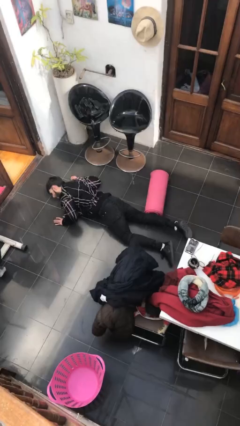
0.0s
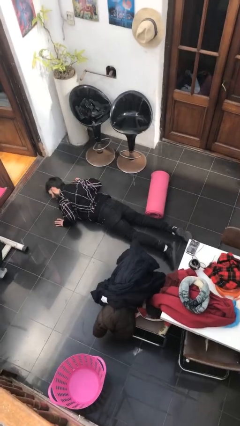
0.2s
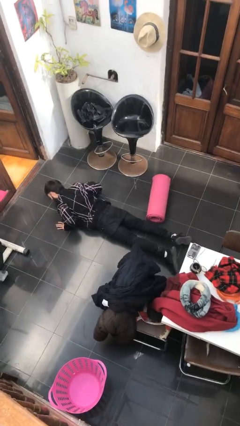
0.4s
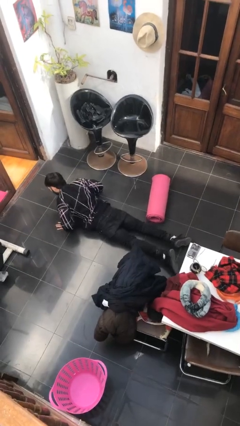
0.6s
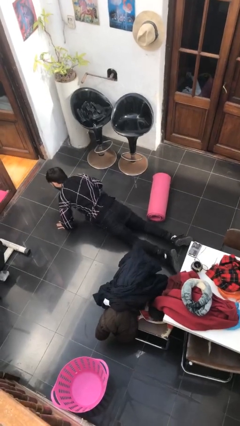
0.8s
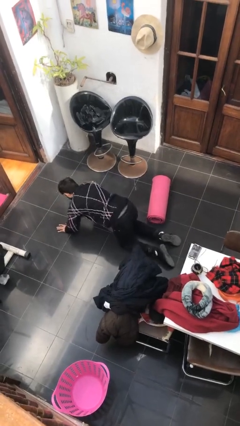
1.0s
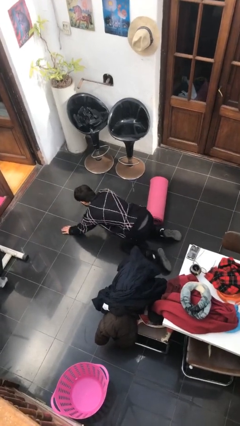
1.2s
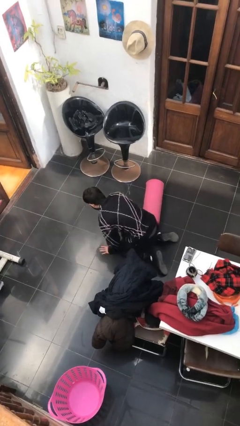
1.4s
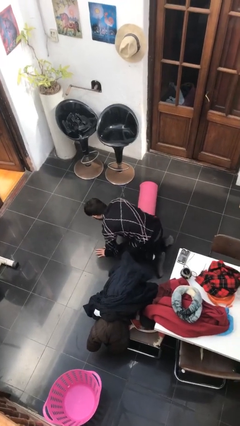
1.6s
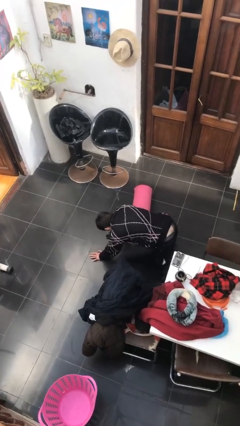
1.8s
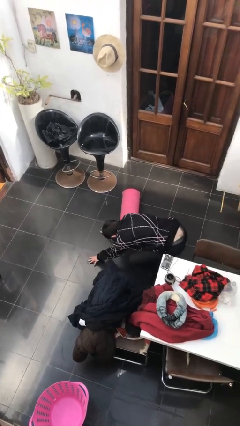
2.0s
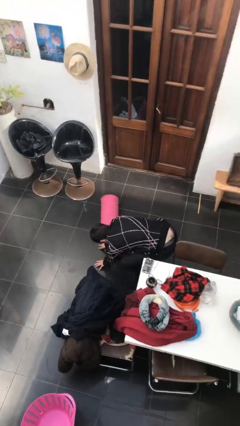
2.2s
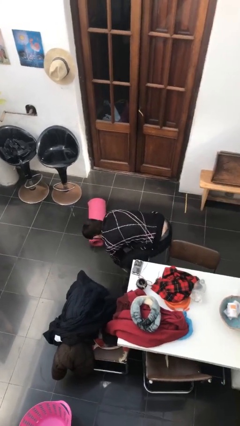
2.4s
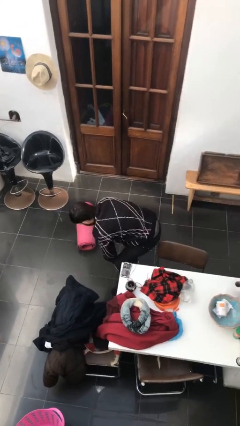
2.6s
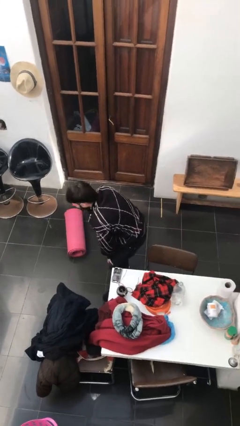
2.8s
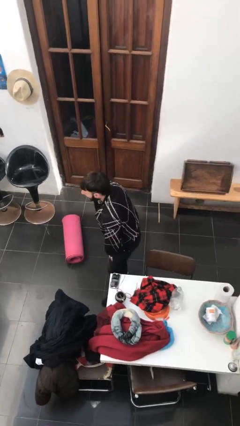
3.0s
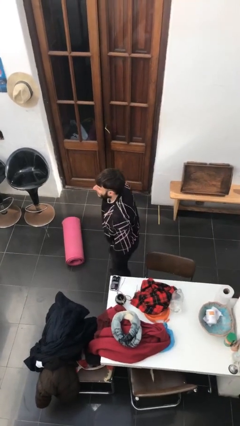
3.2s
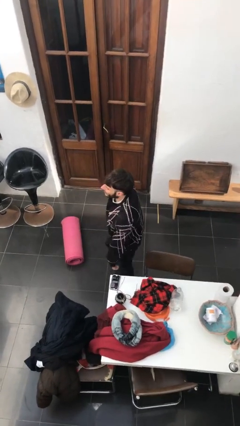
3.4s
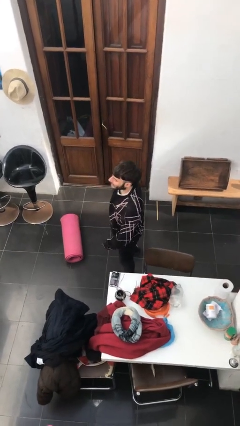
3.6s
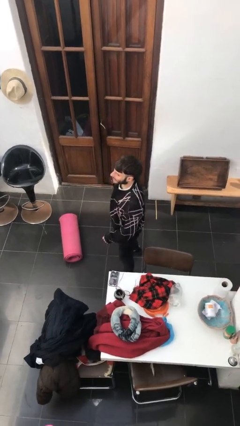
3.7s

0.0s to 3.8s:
person stands up from floor

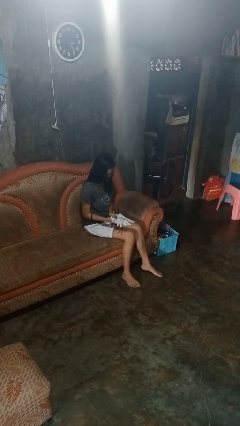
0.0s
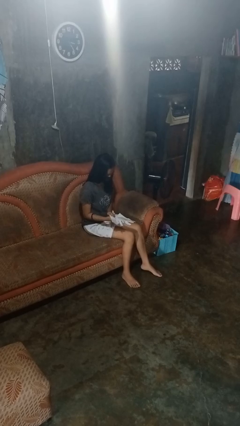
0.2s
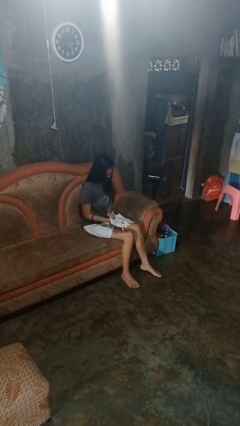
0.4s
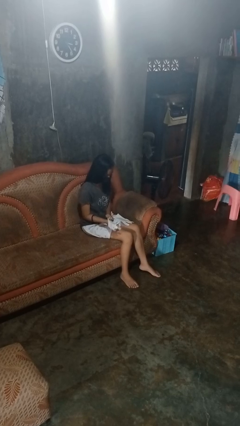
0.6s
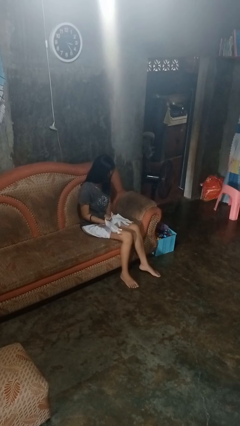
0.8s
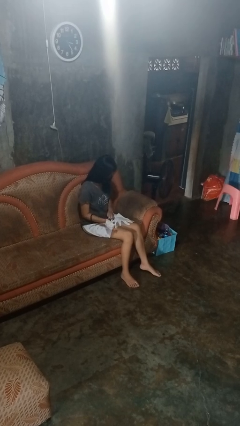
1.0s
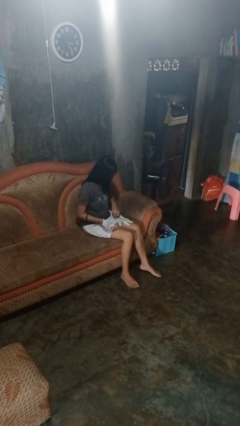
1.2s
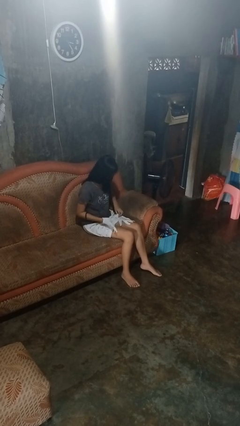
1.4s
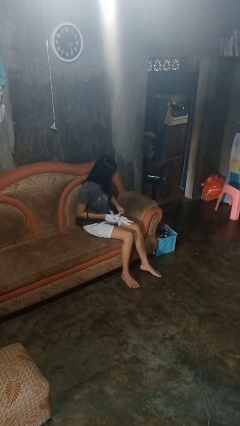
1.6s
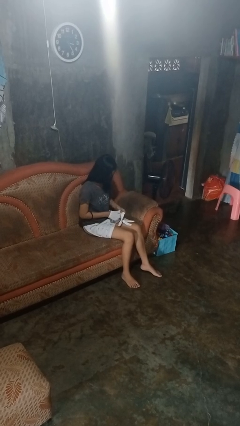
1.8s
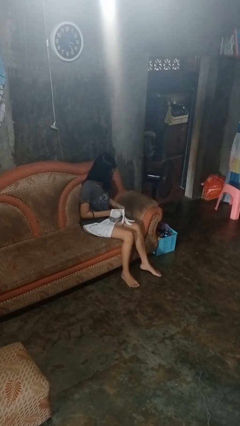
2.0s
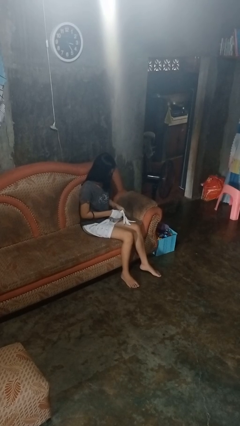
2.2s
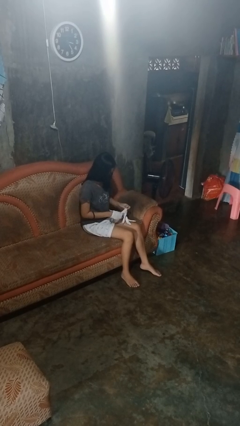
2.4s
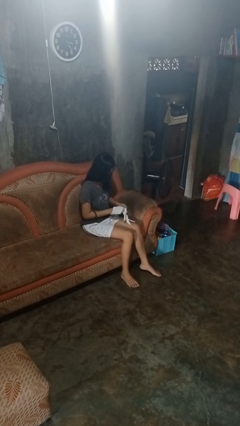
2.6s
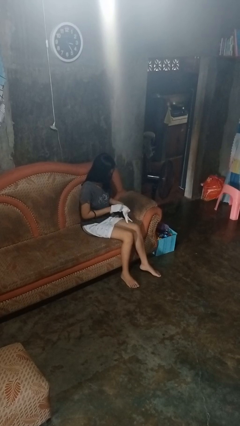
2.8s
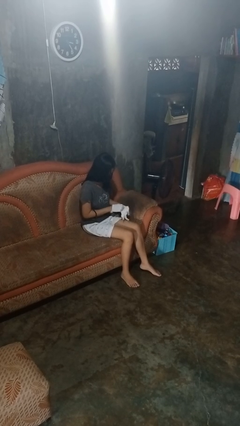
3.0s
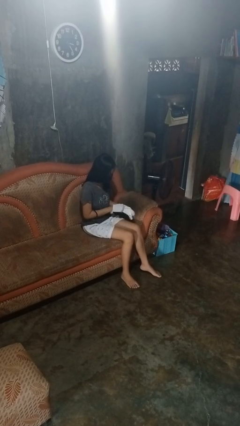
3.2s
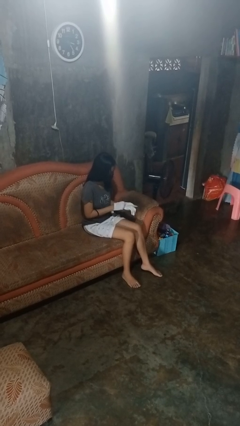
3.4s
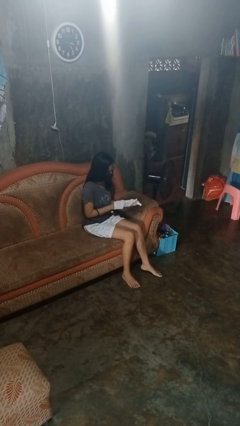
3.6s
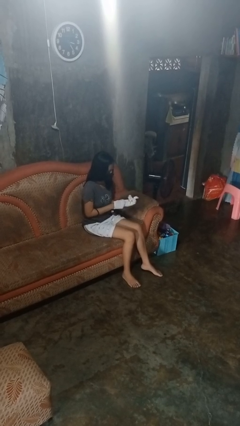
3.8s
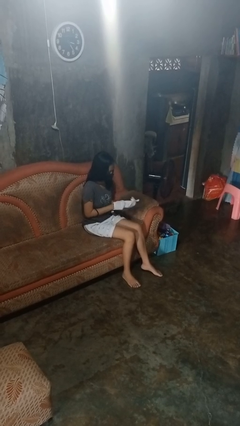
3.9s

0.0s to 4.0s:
person puts on gloves

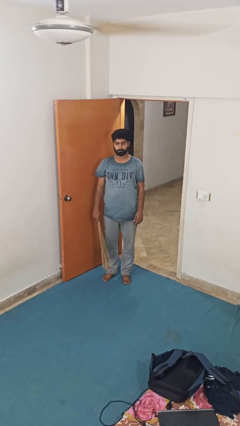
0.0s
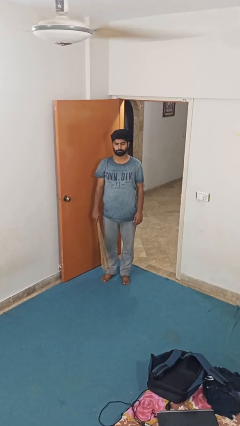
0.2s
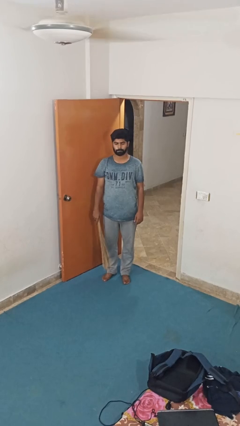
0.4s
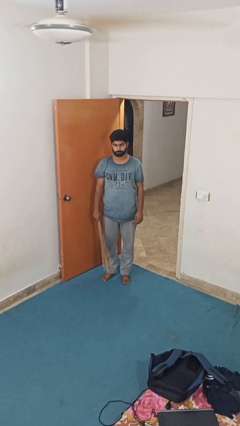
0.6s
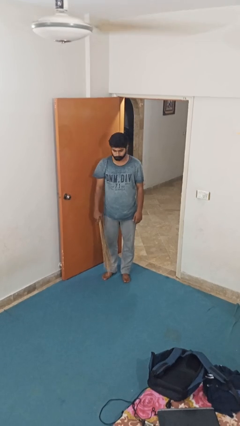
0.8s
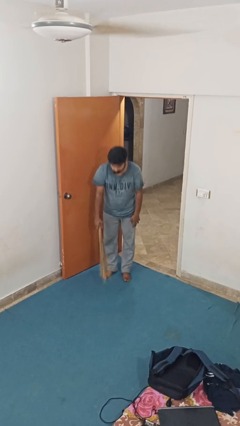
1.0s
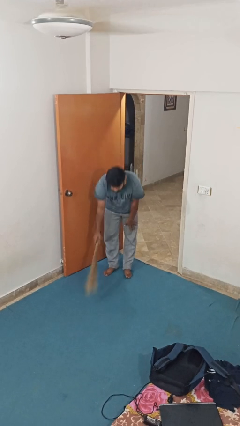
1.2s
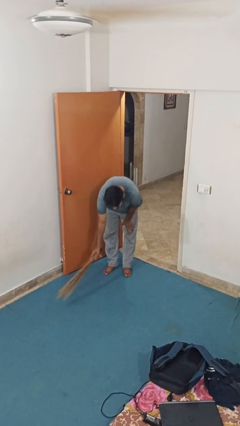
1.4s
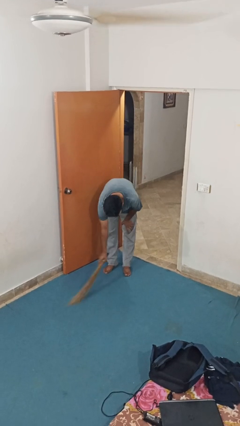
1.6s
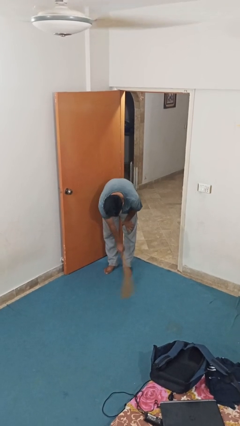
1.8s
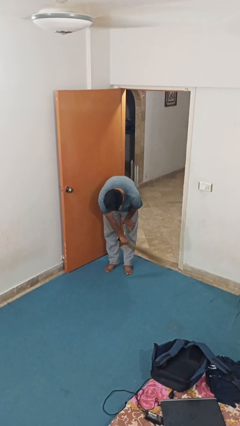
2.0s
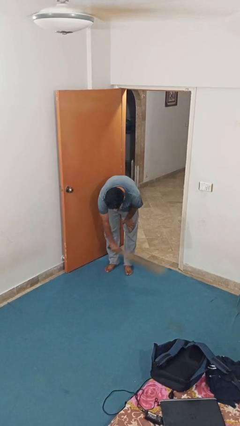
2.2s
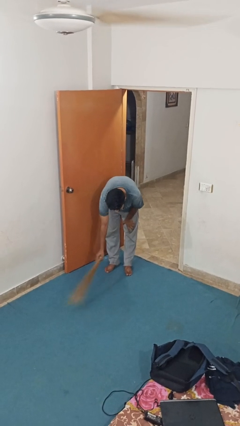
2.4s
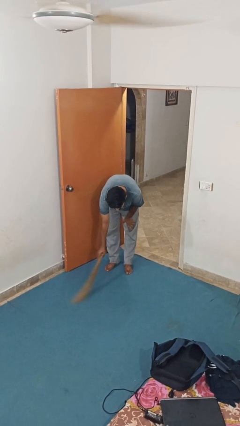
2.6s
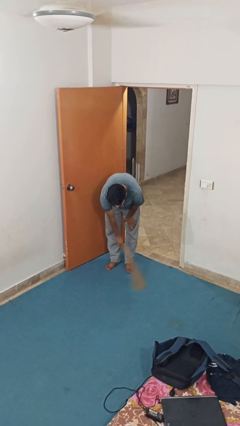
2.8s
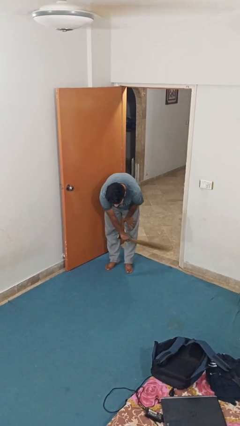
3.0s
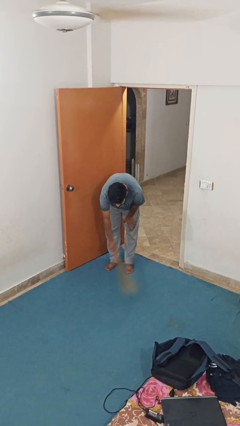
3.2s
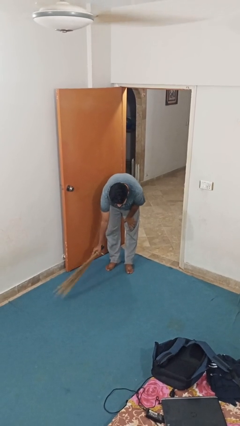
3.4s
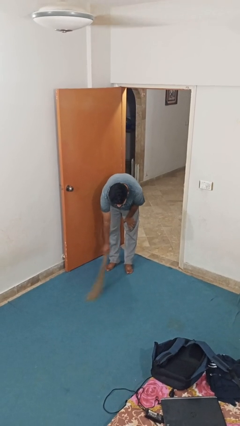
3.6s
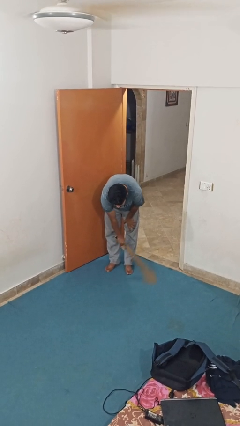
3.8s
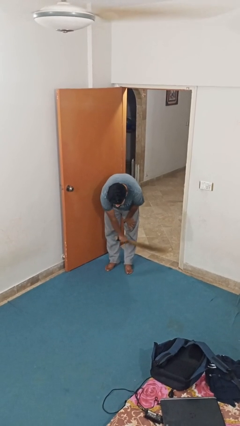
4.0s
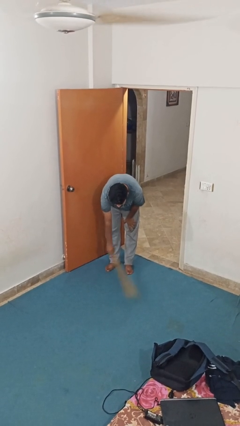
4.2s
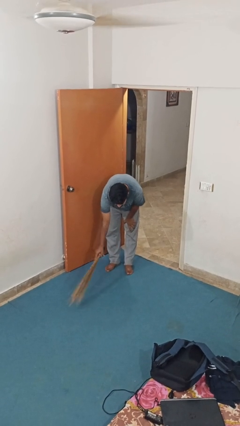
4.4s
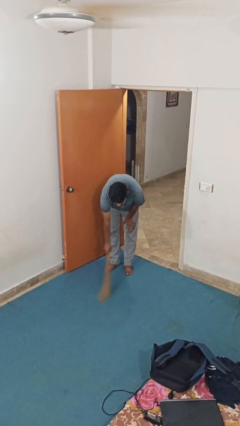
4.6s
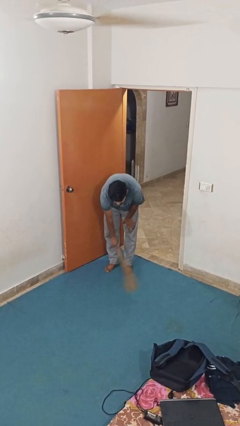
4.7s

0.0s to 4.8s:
person sweeps floor

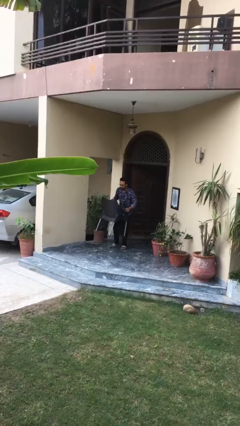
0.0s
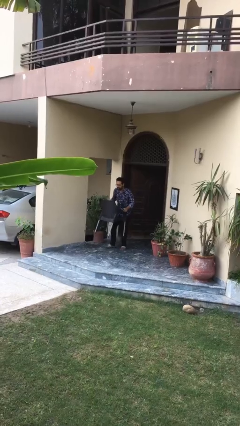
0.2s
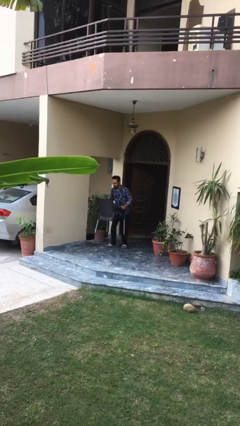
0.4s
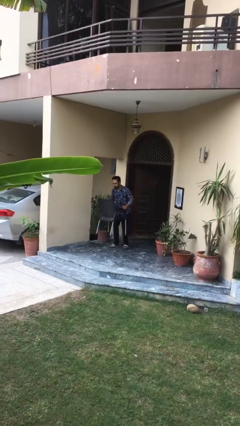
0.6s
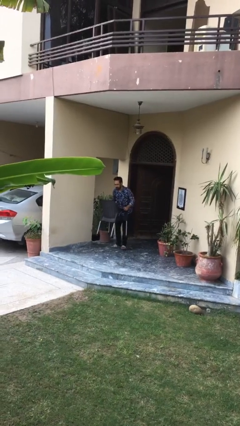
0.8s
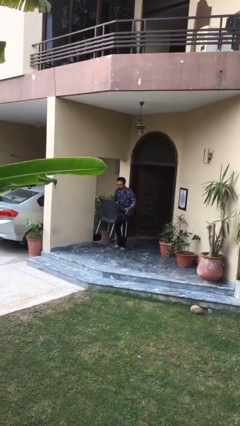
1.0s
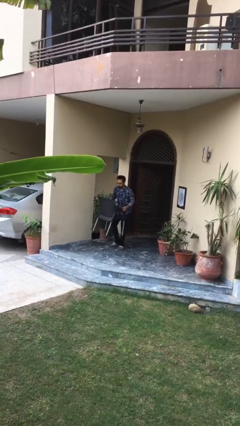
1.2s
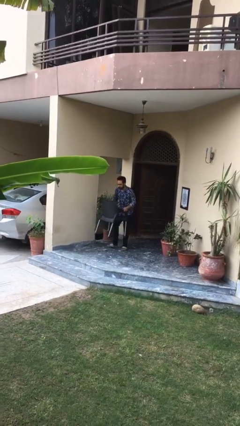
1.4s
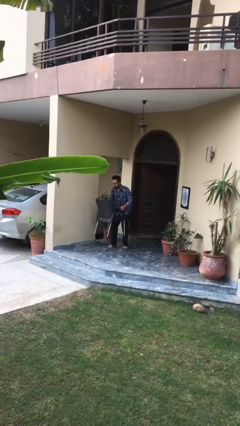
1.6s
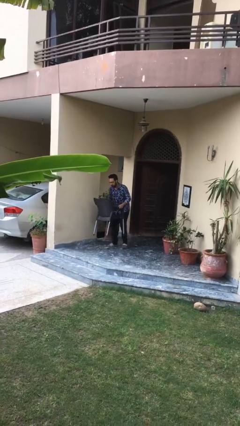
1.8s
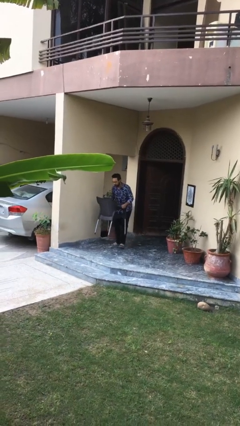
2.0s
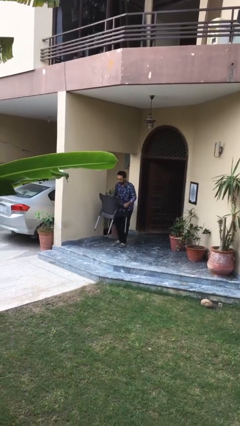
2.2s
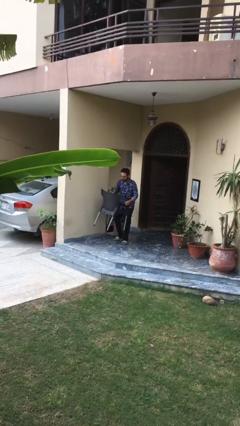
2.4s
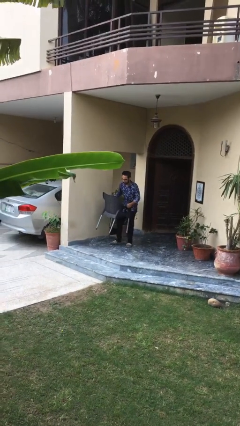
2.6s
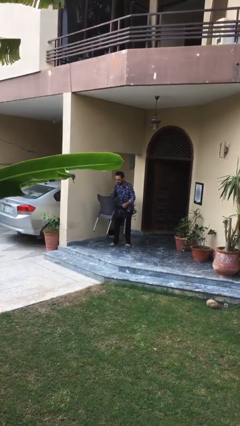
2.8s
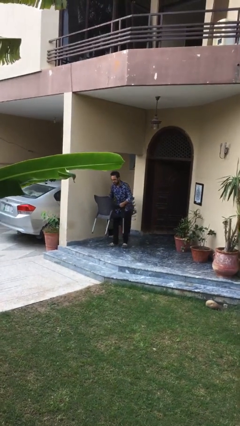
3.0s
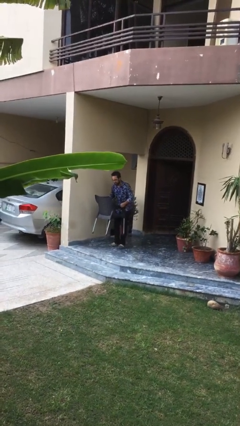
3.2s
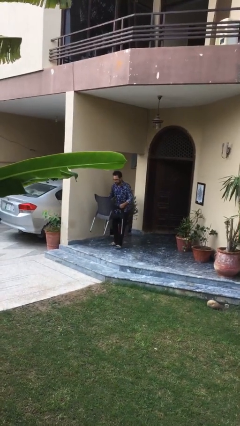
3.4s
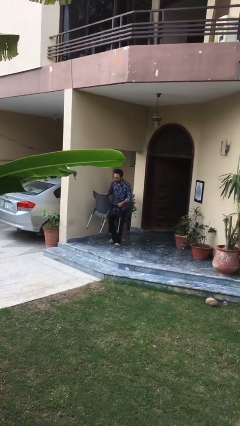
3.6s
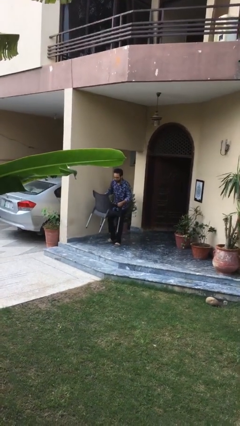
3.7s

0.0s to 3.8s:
person carries heavy object

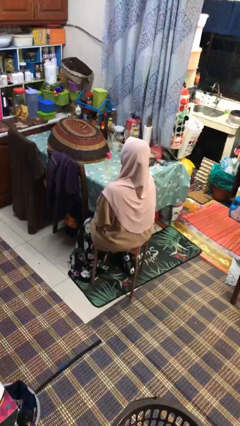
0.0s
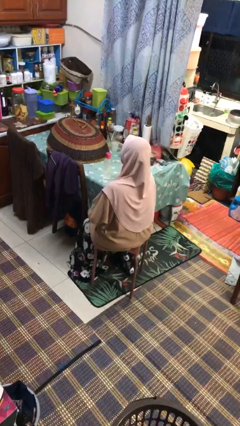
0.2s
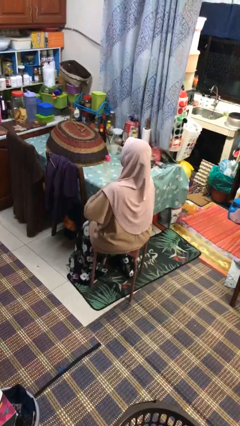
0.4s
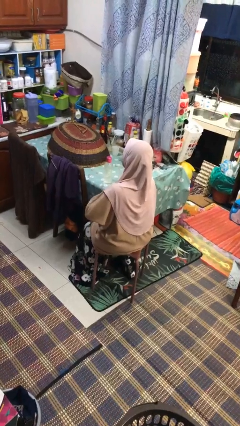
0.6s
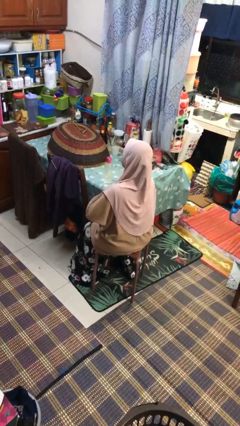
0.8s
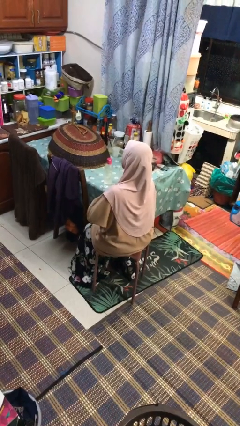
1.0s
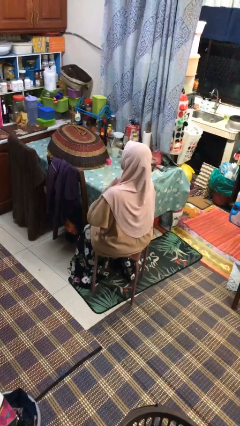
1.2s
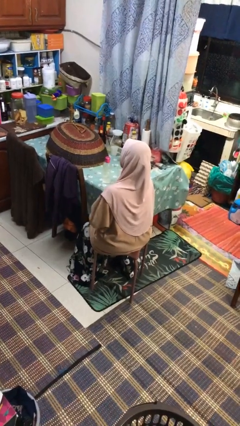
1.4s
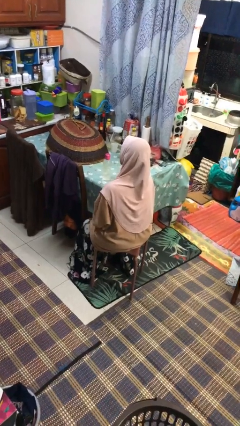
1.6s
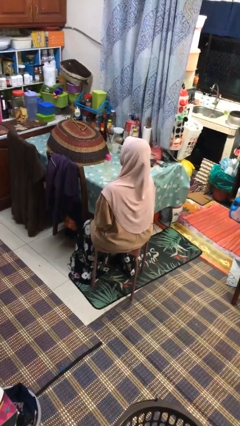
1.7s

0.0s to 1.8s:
person drums on chest
